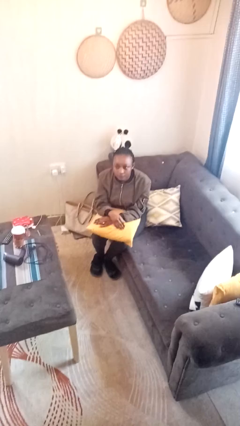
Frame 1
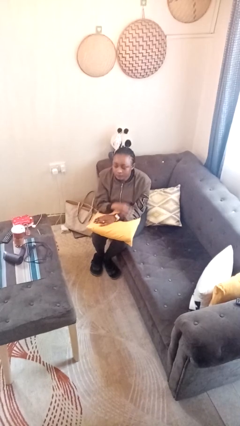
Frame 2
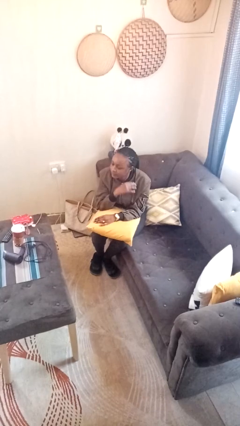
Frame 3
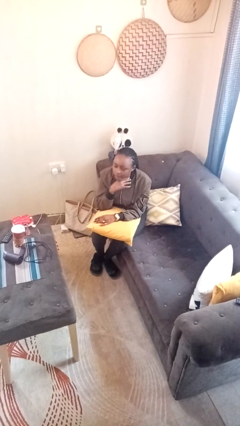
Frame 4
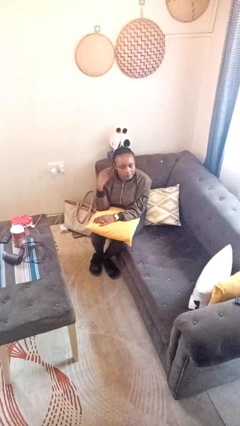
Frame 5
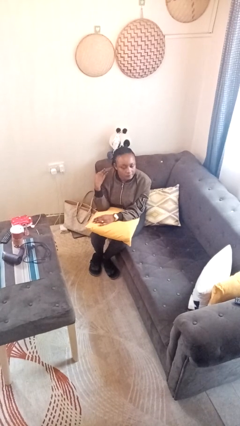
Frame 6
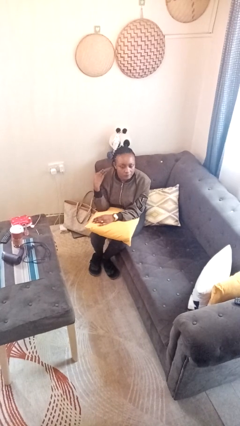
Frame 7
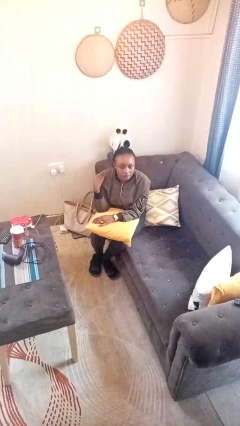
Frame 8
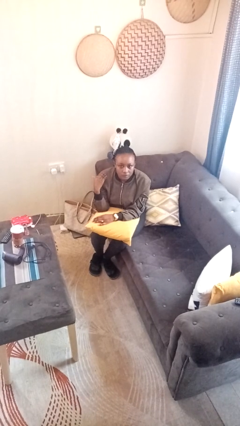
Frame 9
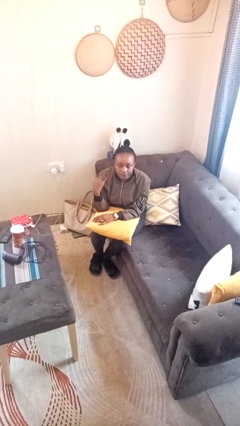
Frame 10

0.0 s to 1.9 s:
person gestures cut

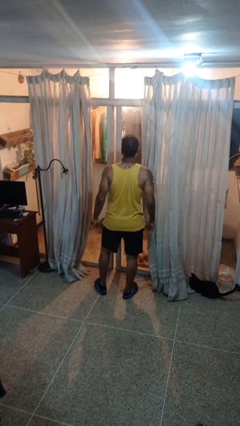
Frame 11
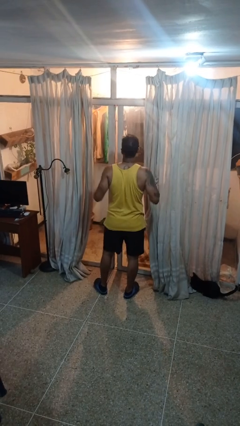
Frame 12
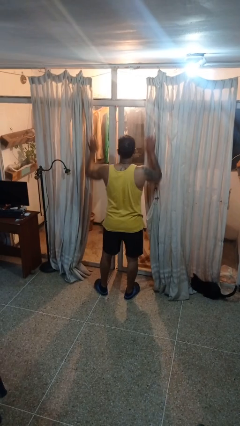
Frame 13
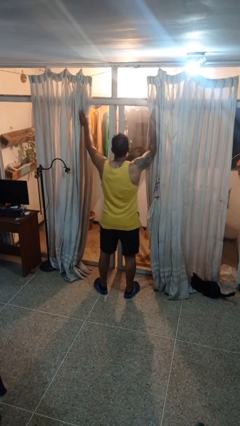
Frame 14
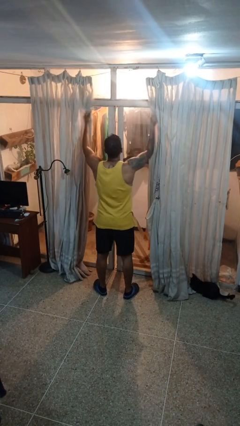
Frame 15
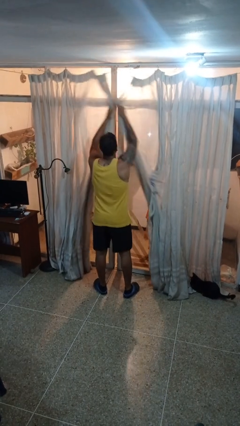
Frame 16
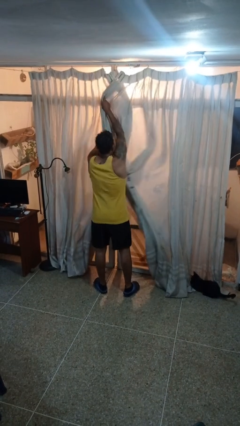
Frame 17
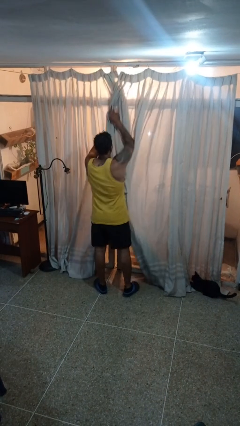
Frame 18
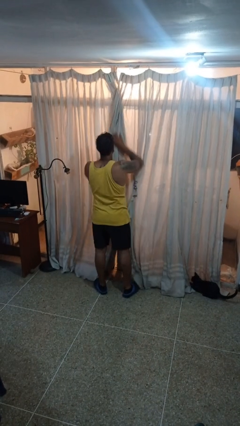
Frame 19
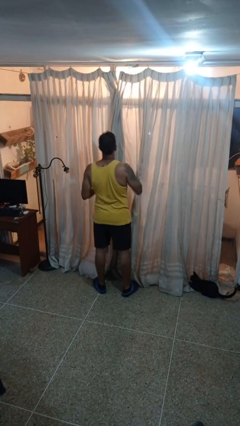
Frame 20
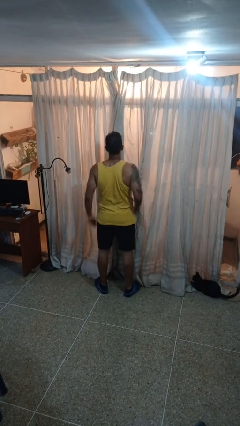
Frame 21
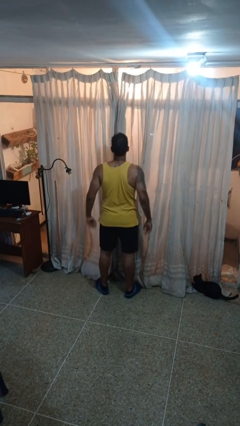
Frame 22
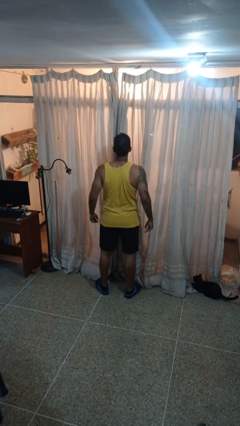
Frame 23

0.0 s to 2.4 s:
person closes curtains

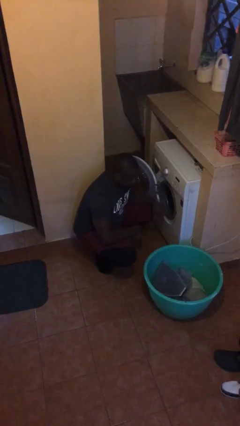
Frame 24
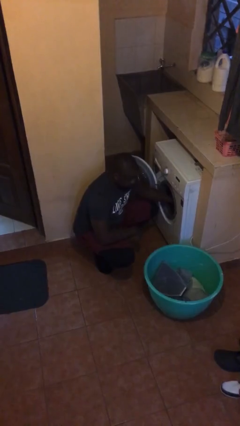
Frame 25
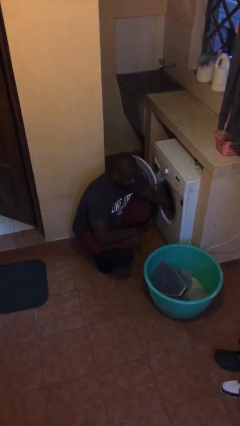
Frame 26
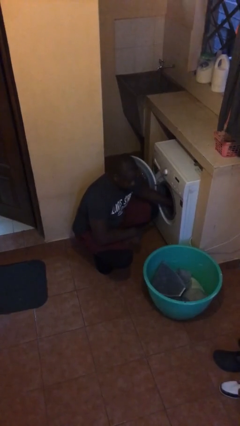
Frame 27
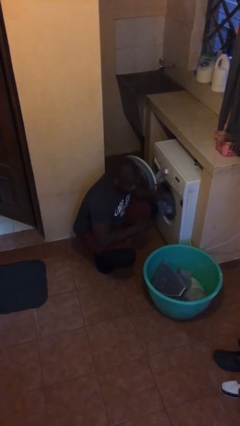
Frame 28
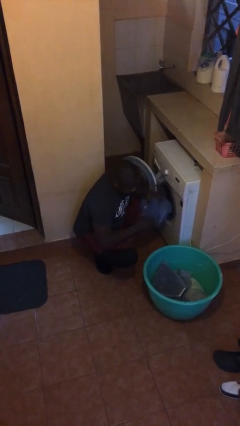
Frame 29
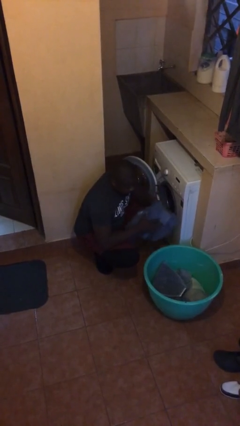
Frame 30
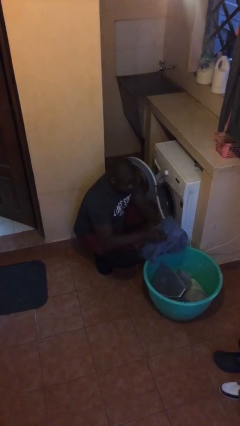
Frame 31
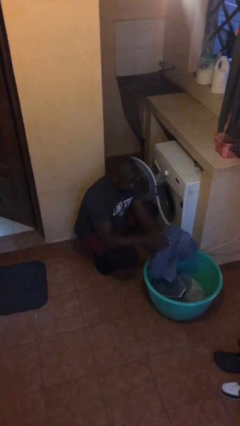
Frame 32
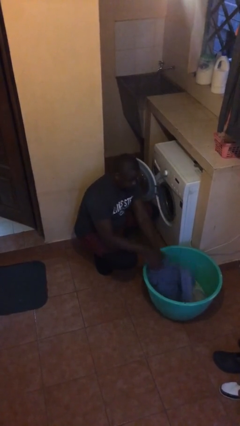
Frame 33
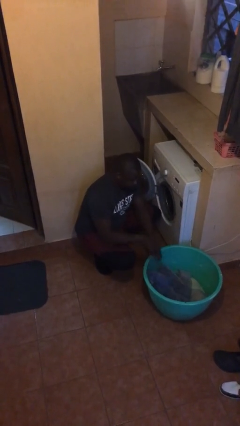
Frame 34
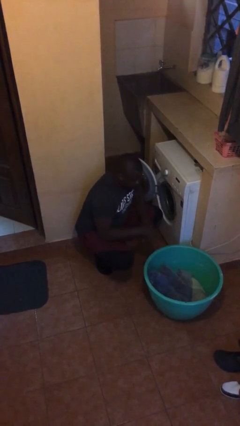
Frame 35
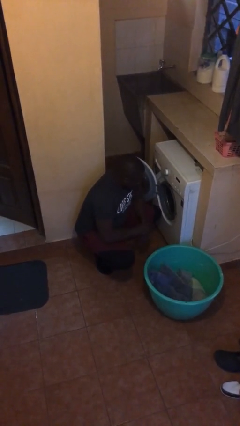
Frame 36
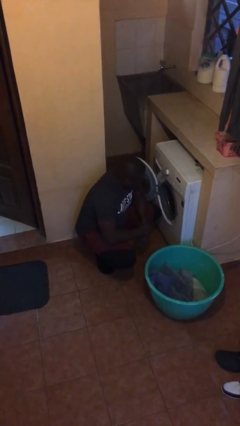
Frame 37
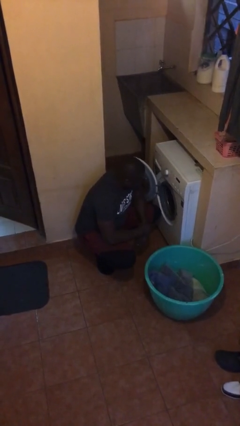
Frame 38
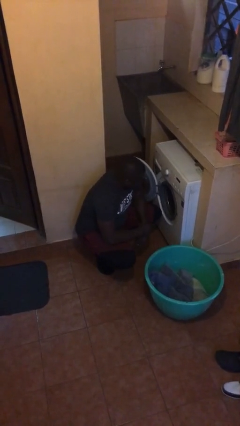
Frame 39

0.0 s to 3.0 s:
person unloads dryer

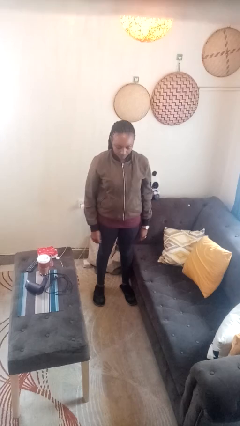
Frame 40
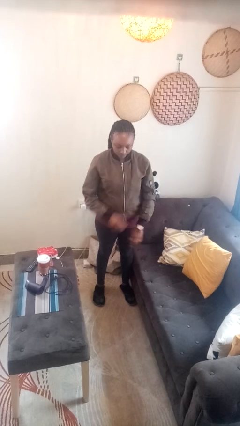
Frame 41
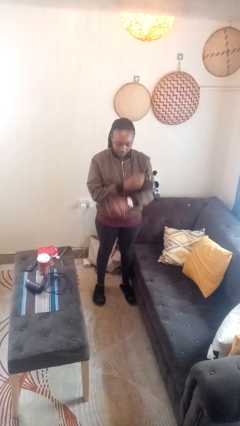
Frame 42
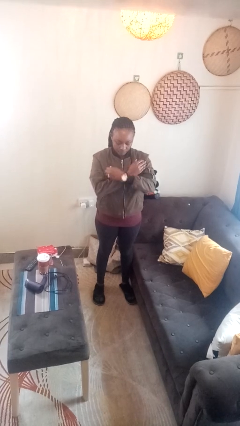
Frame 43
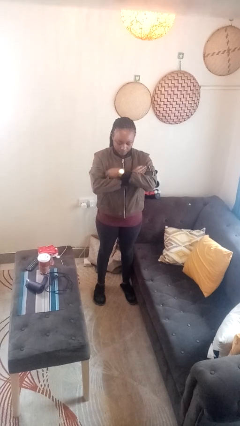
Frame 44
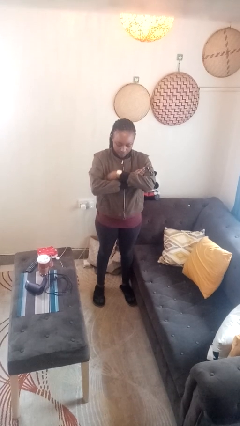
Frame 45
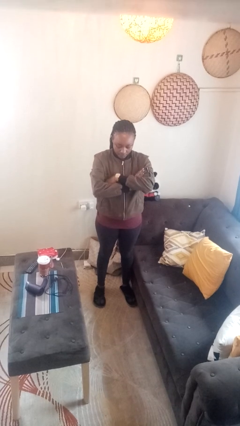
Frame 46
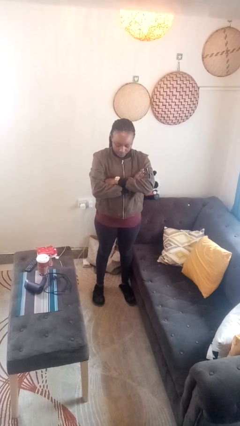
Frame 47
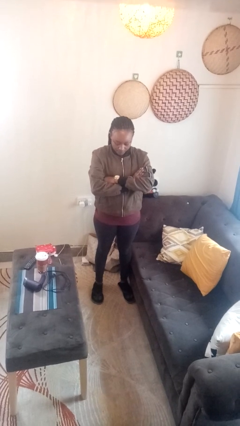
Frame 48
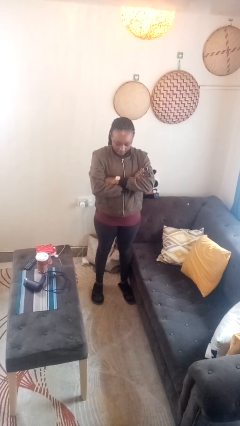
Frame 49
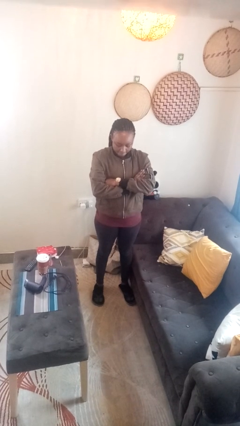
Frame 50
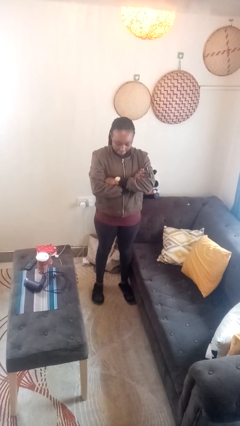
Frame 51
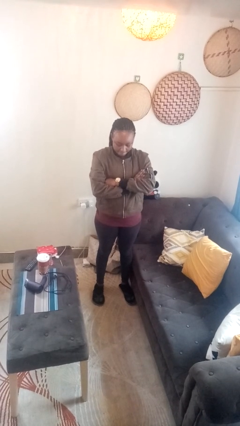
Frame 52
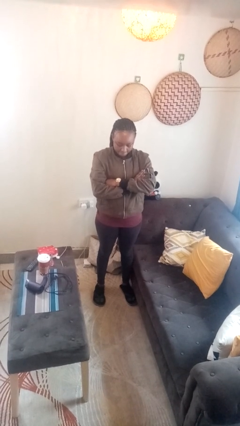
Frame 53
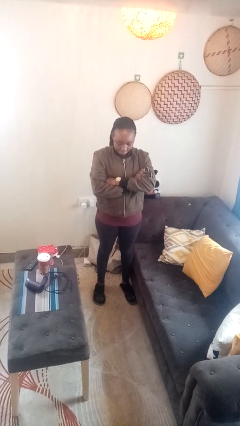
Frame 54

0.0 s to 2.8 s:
person gestures arms x

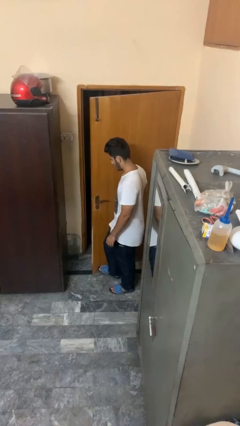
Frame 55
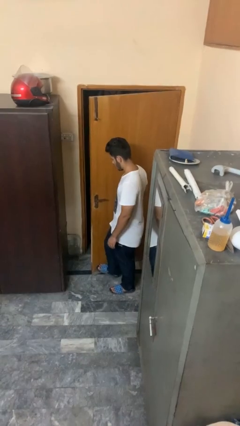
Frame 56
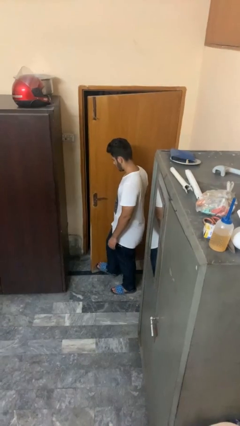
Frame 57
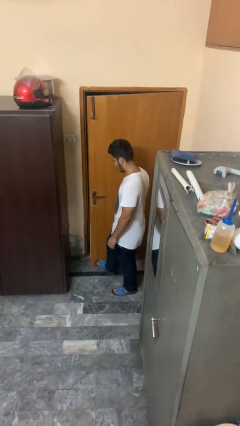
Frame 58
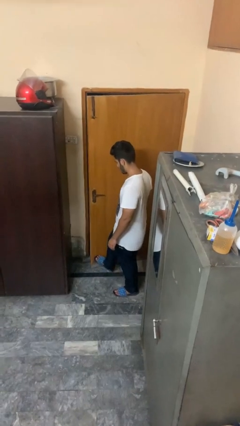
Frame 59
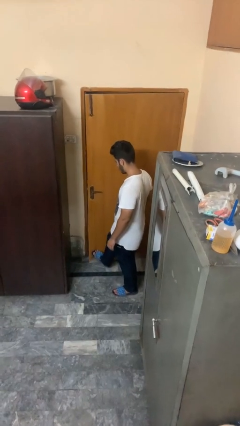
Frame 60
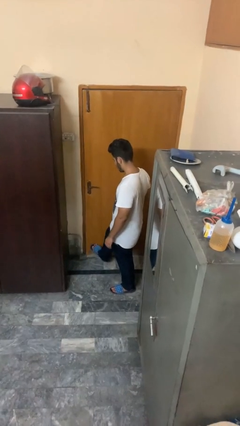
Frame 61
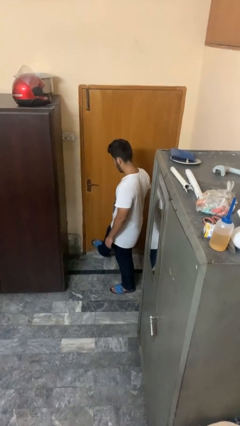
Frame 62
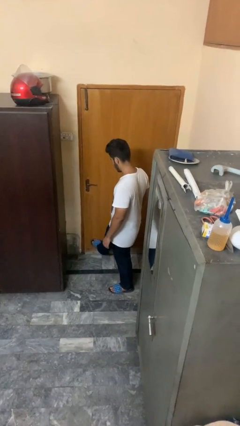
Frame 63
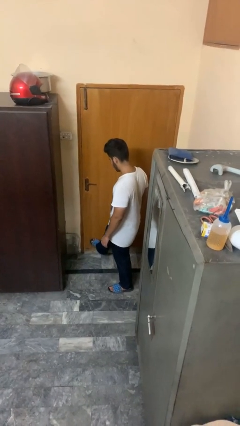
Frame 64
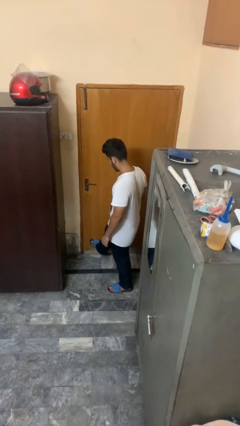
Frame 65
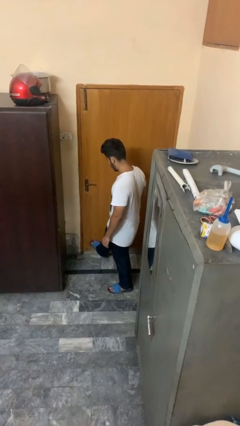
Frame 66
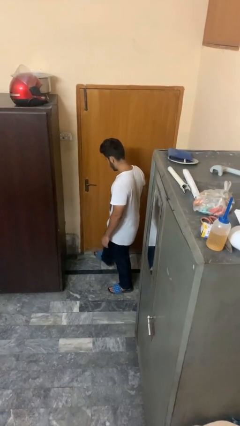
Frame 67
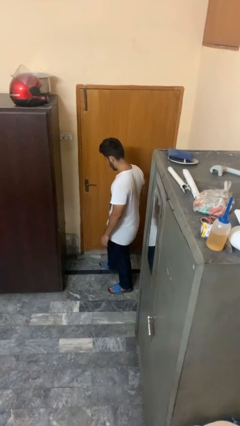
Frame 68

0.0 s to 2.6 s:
person closes door with foot

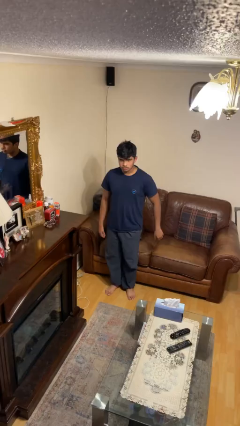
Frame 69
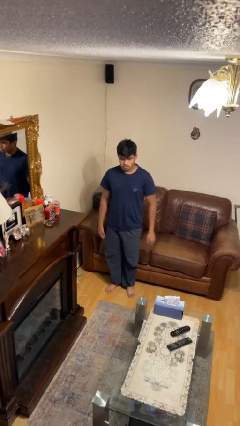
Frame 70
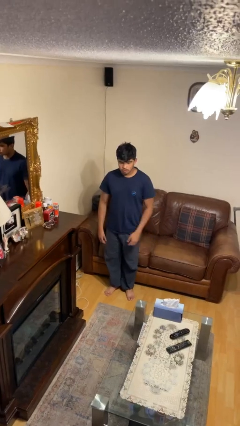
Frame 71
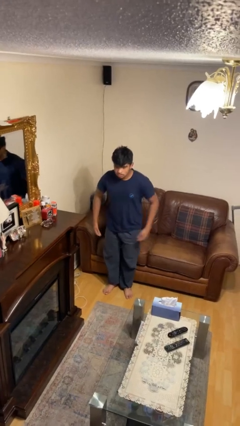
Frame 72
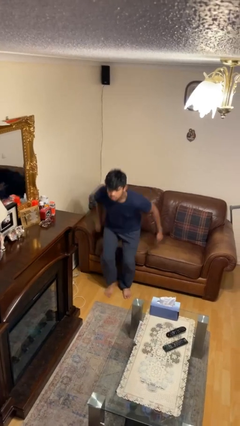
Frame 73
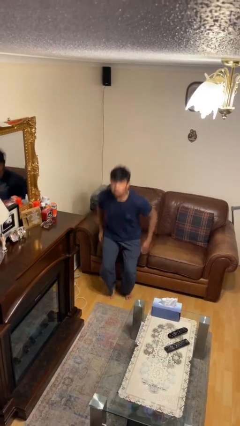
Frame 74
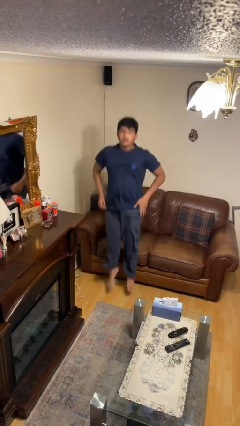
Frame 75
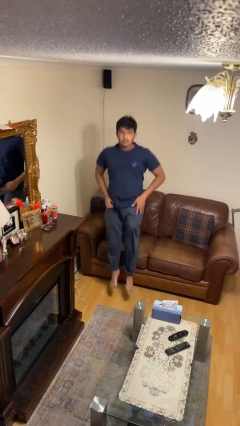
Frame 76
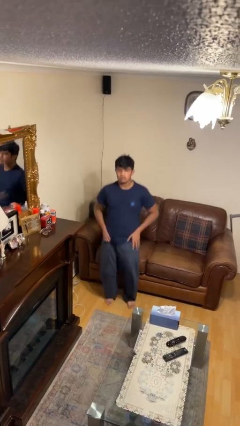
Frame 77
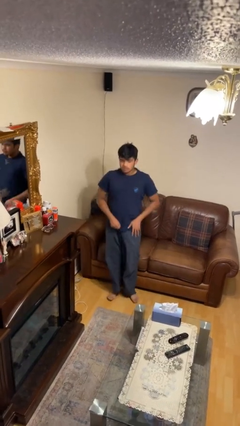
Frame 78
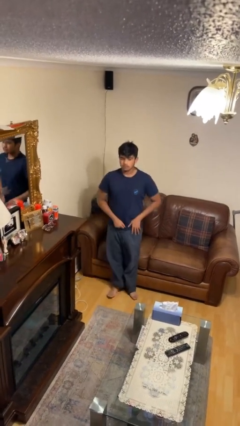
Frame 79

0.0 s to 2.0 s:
person jumps

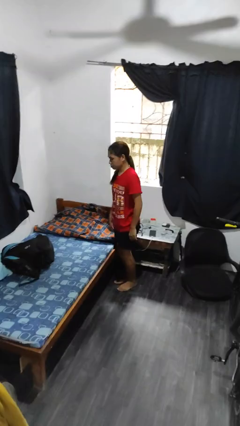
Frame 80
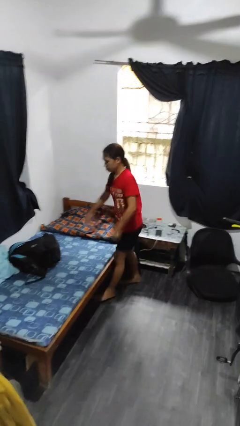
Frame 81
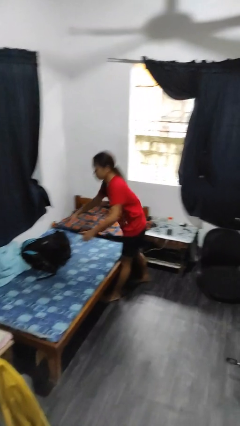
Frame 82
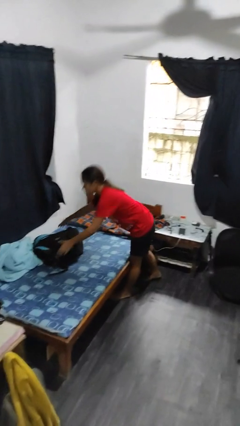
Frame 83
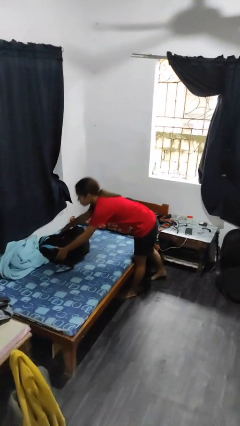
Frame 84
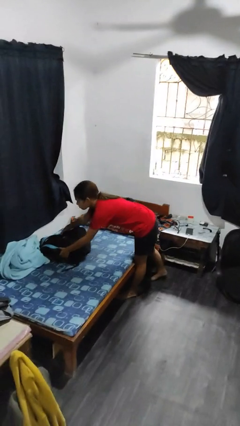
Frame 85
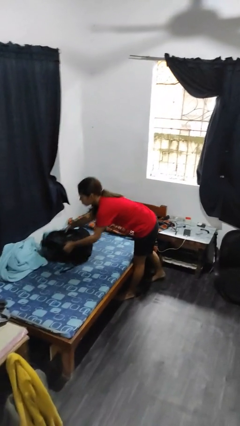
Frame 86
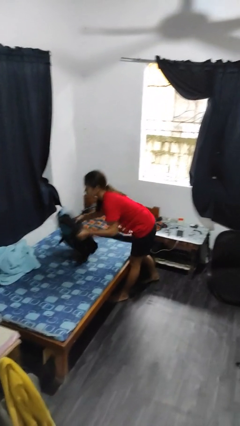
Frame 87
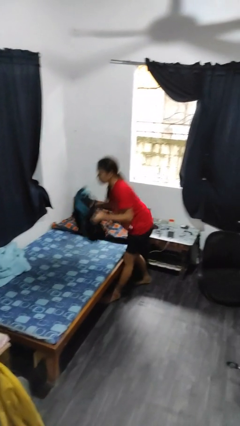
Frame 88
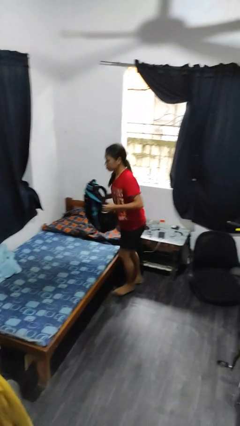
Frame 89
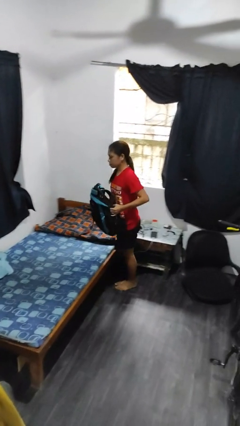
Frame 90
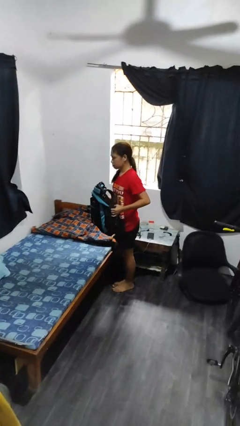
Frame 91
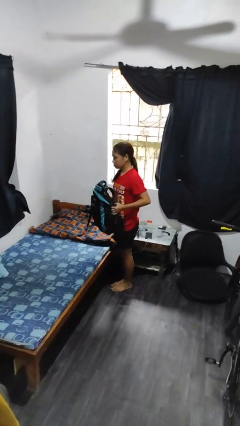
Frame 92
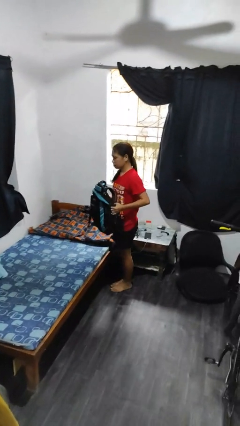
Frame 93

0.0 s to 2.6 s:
person picks up object from bed
